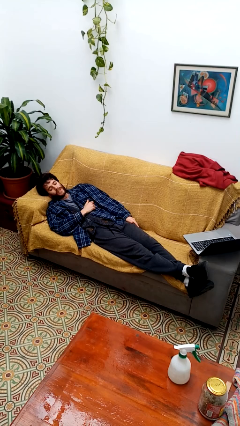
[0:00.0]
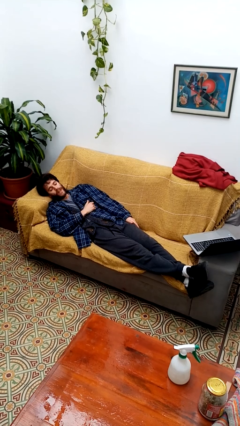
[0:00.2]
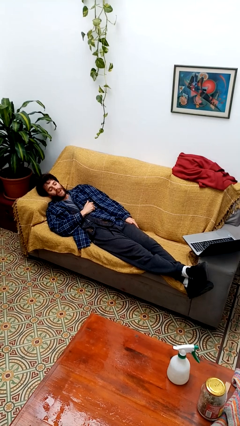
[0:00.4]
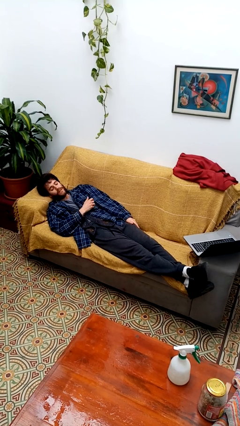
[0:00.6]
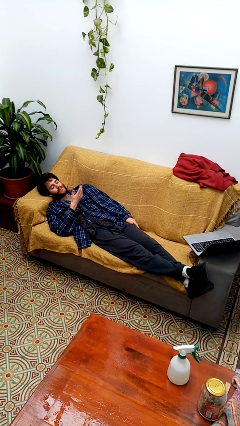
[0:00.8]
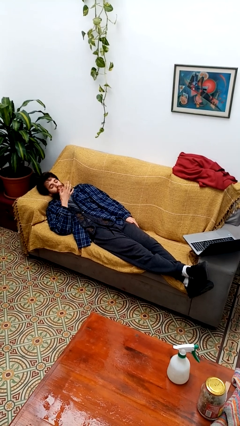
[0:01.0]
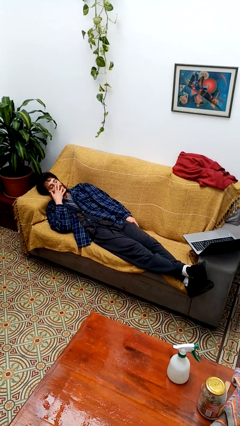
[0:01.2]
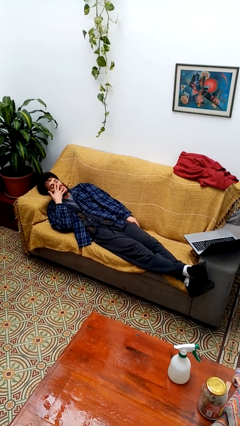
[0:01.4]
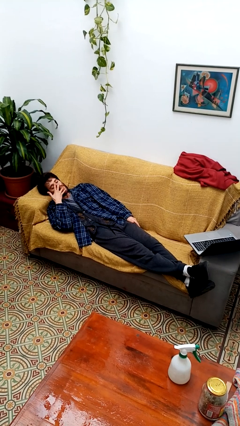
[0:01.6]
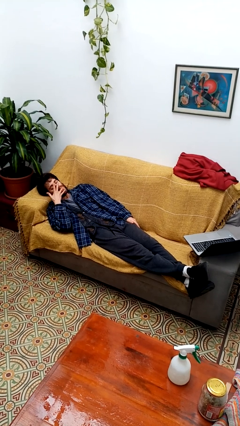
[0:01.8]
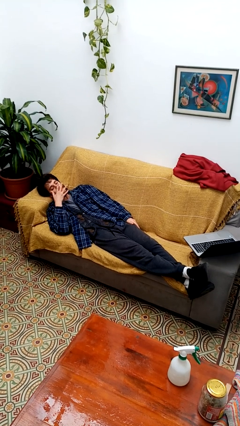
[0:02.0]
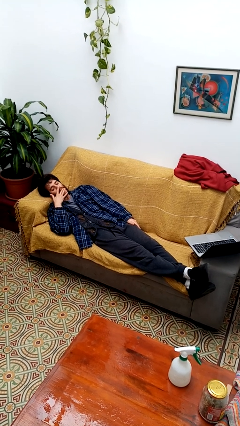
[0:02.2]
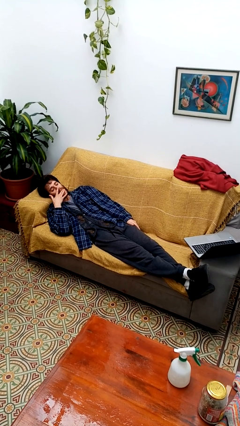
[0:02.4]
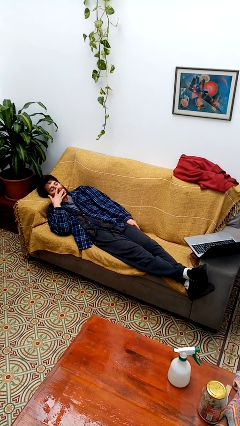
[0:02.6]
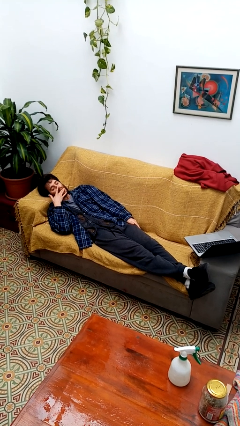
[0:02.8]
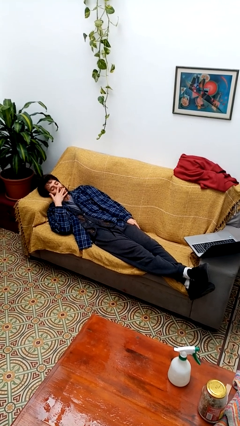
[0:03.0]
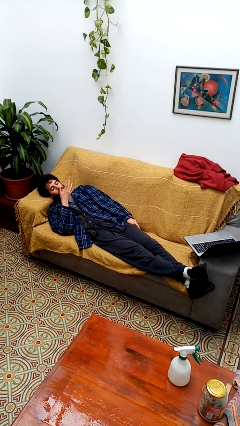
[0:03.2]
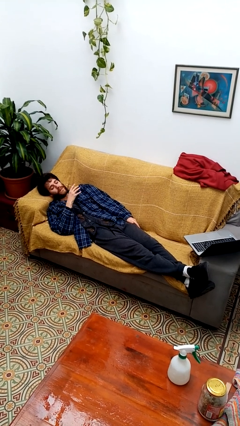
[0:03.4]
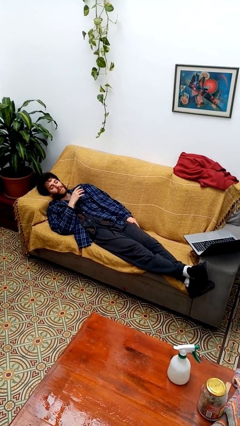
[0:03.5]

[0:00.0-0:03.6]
person licks fingers

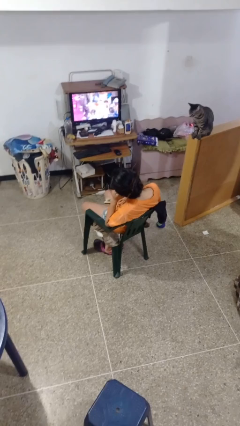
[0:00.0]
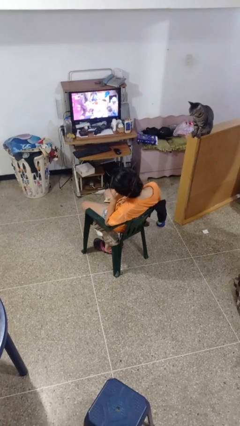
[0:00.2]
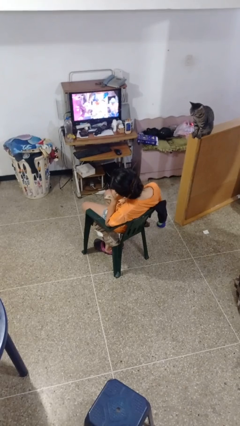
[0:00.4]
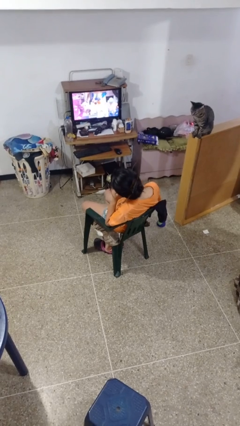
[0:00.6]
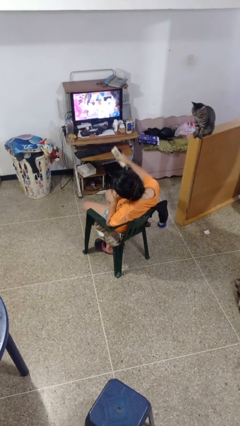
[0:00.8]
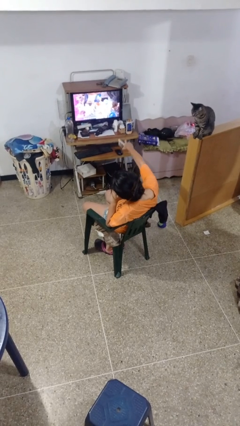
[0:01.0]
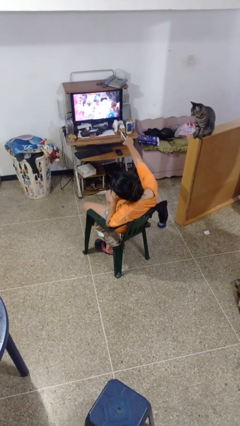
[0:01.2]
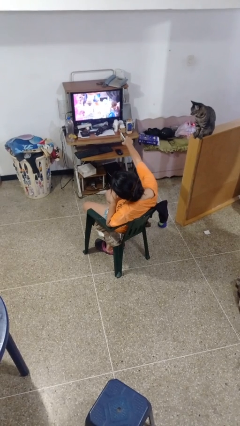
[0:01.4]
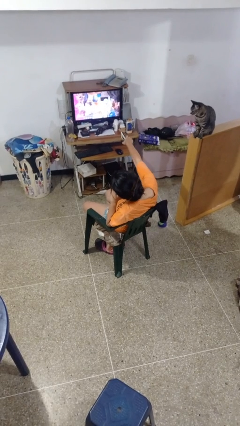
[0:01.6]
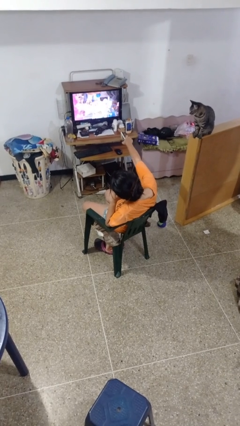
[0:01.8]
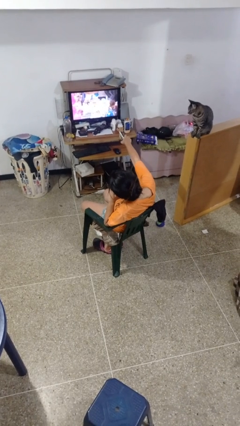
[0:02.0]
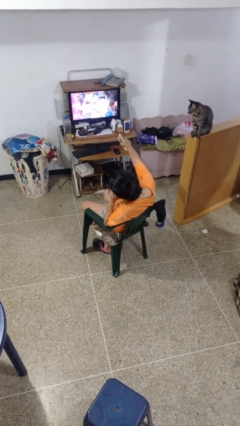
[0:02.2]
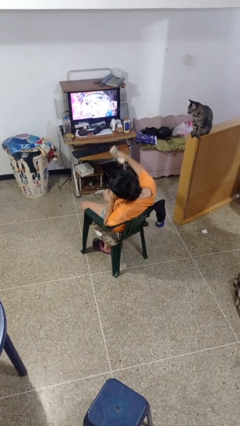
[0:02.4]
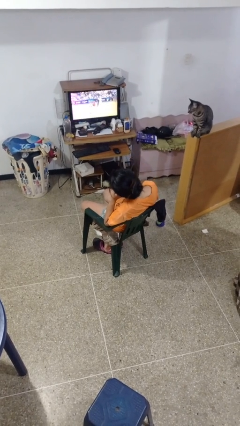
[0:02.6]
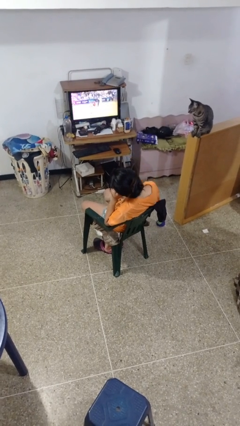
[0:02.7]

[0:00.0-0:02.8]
person uses television remote

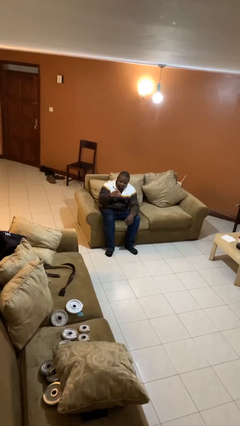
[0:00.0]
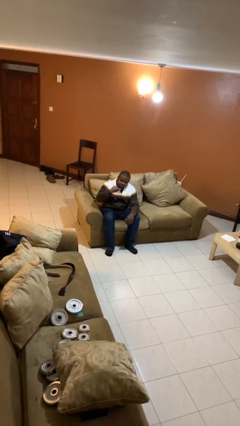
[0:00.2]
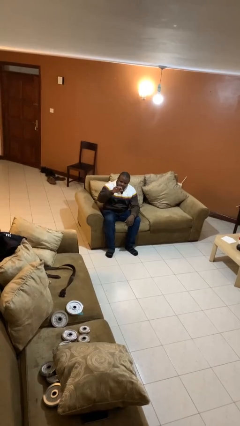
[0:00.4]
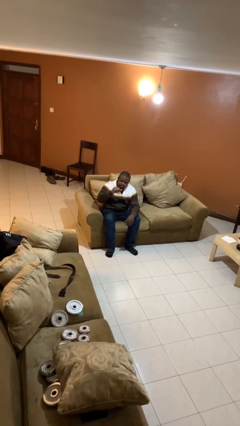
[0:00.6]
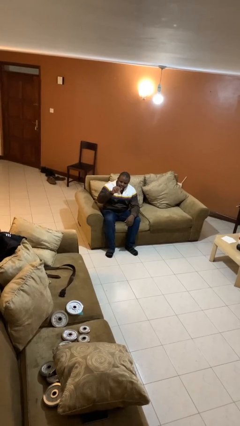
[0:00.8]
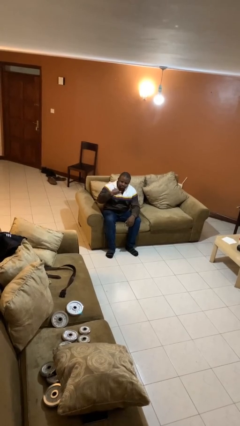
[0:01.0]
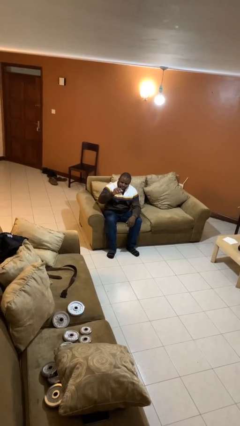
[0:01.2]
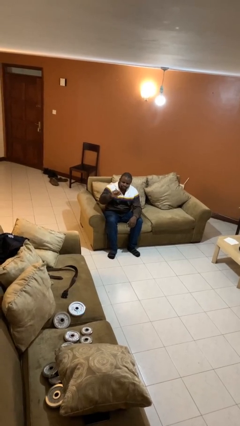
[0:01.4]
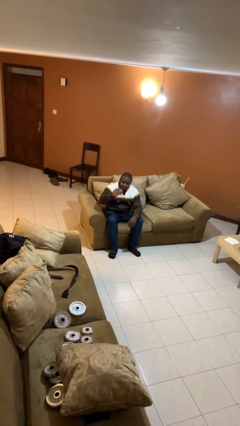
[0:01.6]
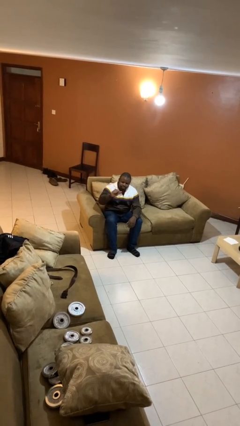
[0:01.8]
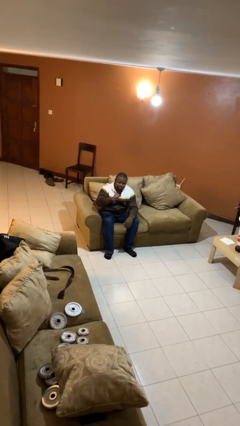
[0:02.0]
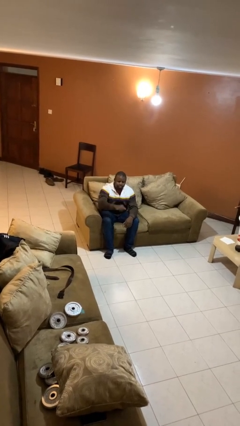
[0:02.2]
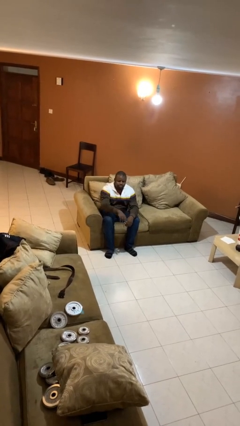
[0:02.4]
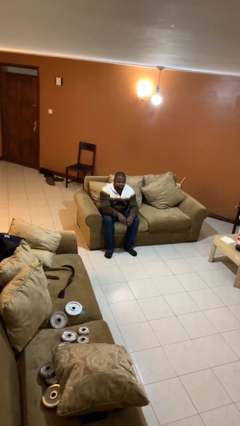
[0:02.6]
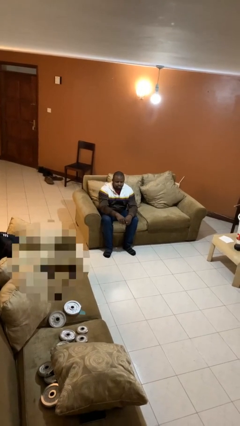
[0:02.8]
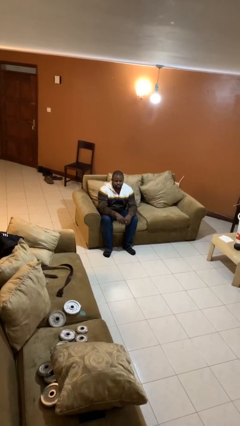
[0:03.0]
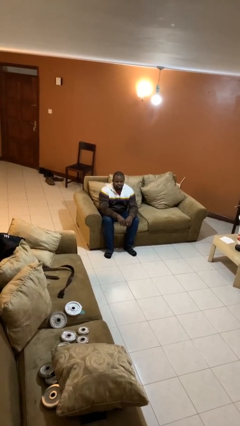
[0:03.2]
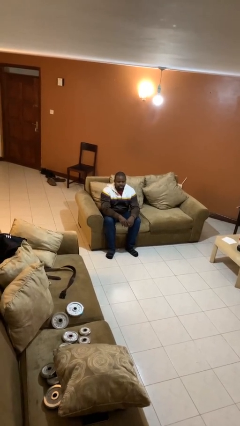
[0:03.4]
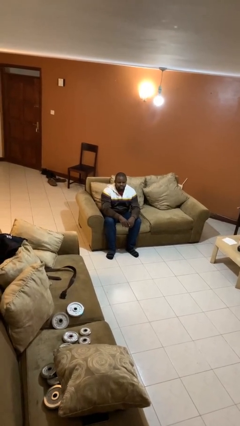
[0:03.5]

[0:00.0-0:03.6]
person gestures come here

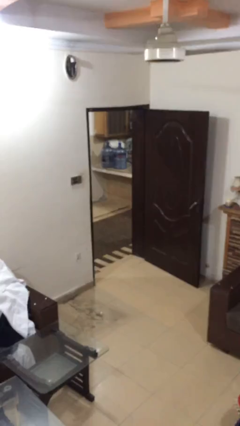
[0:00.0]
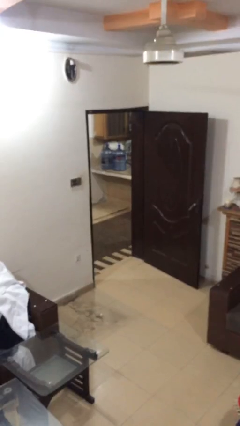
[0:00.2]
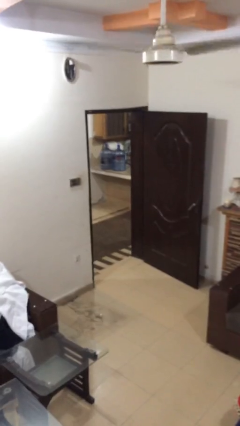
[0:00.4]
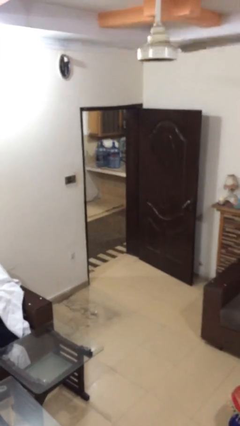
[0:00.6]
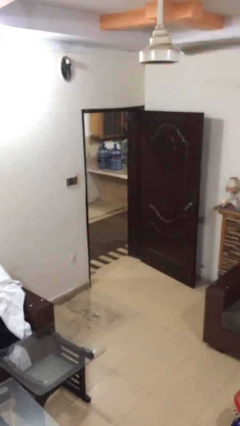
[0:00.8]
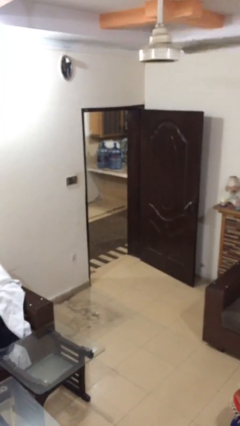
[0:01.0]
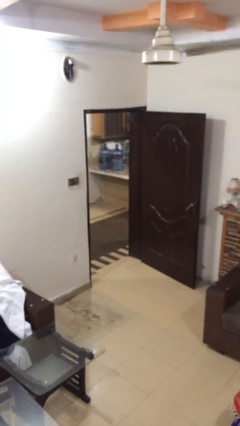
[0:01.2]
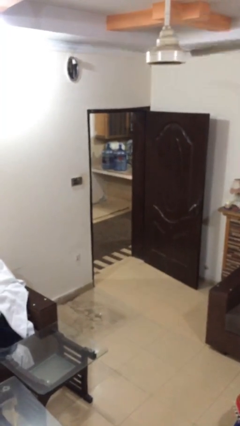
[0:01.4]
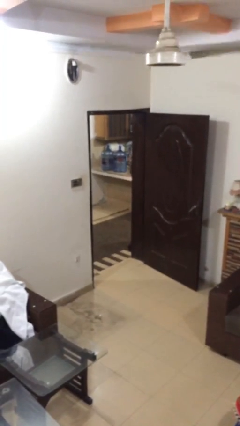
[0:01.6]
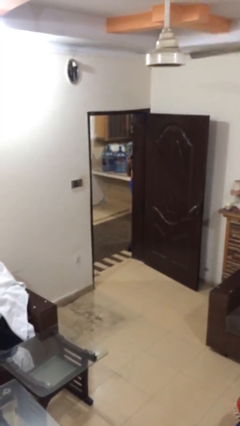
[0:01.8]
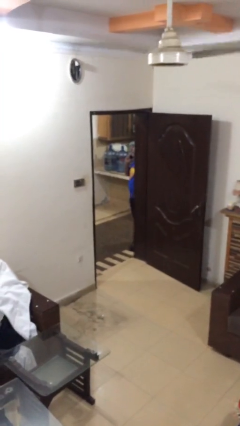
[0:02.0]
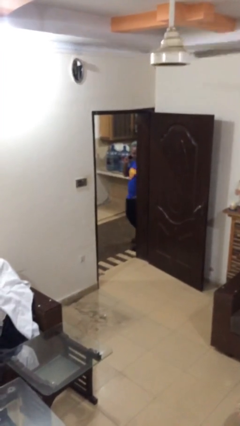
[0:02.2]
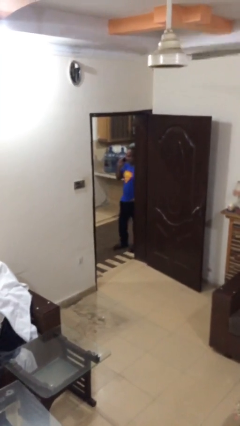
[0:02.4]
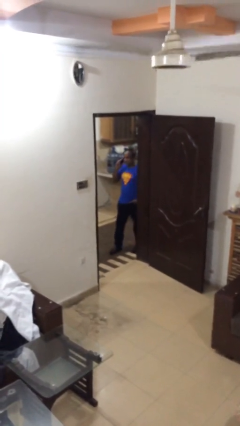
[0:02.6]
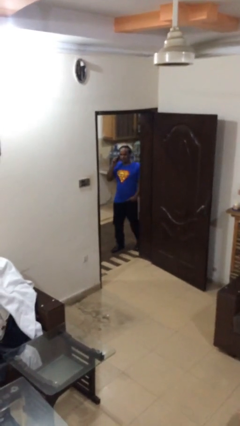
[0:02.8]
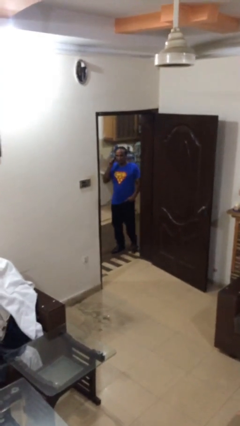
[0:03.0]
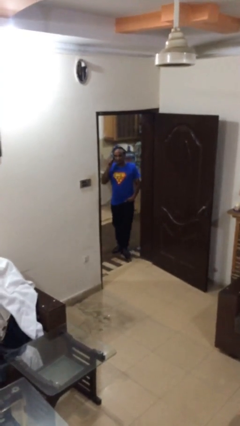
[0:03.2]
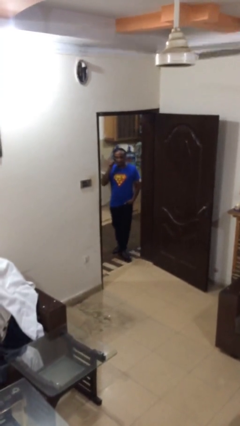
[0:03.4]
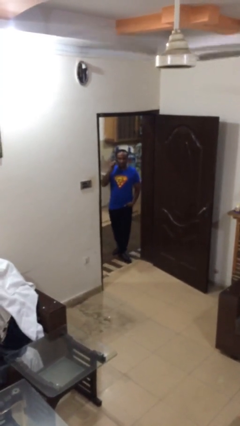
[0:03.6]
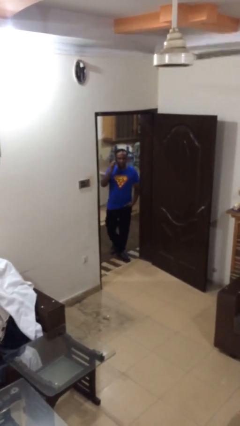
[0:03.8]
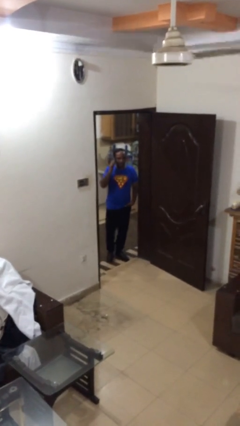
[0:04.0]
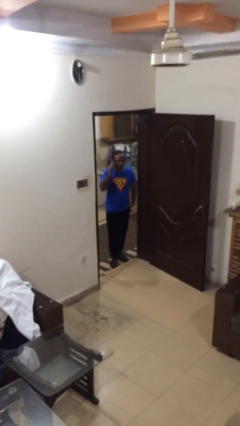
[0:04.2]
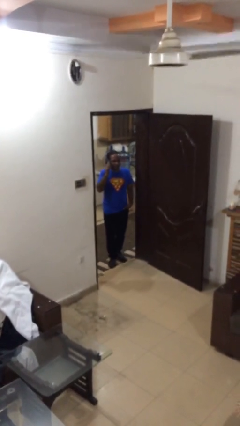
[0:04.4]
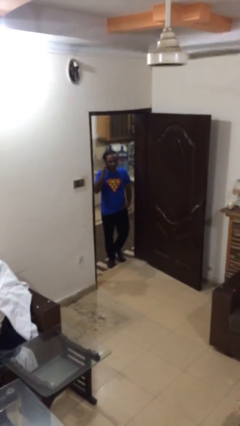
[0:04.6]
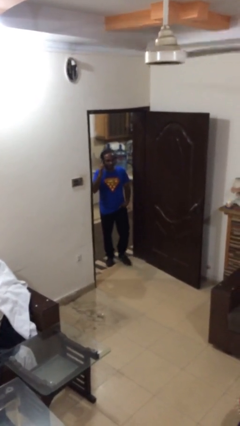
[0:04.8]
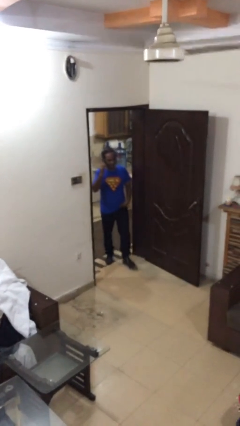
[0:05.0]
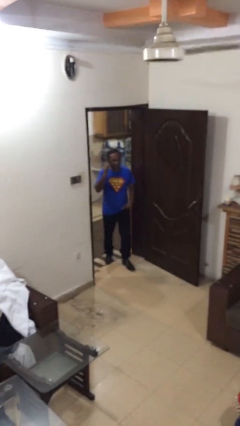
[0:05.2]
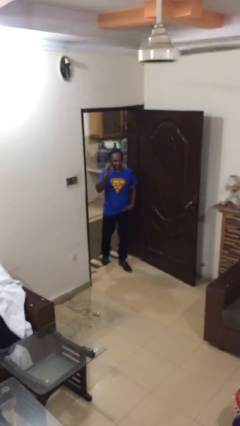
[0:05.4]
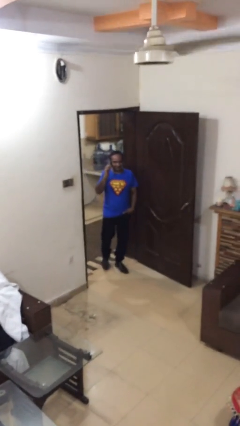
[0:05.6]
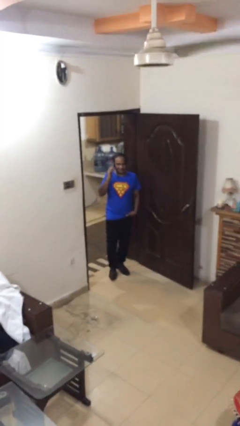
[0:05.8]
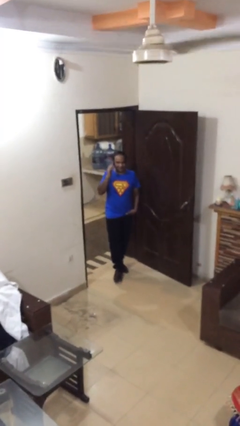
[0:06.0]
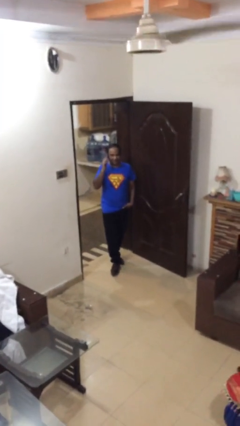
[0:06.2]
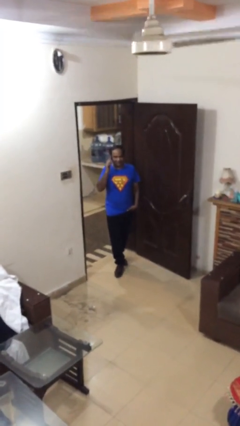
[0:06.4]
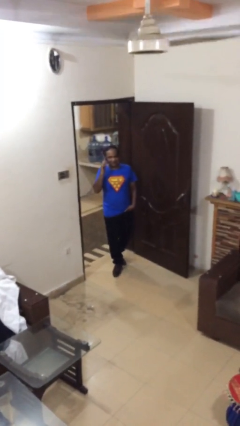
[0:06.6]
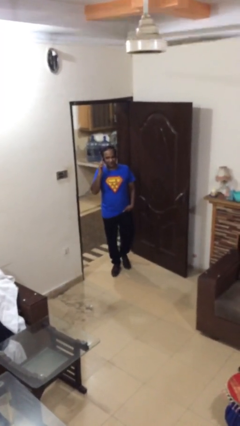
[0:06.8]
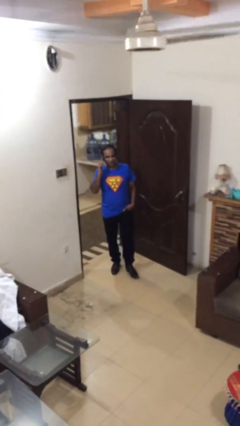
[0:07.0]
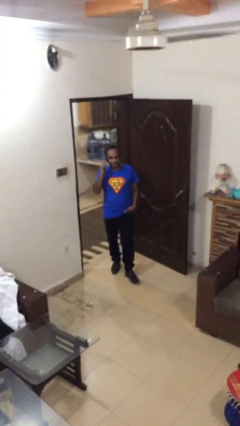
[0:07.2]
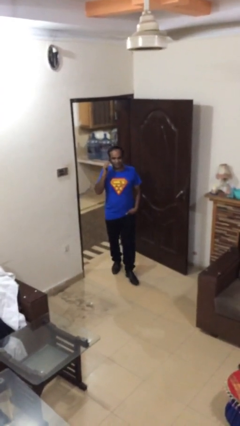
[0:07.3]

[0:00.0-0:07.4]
person enters scene through structure

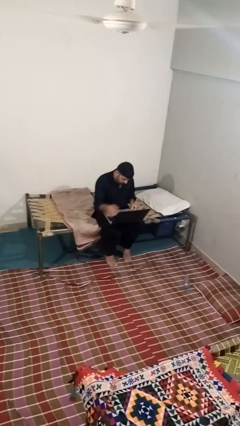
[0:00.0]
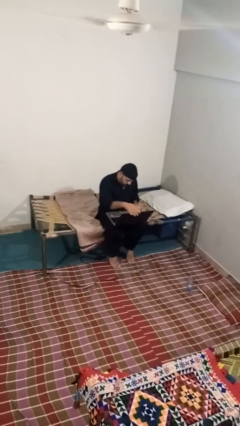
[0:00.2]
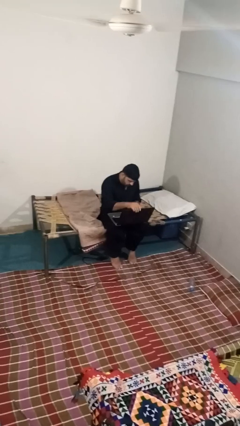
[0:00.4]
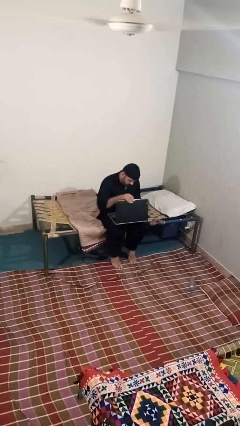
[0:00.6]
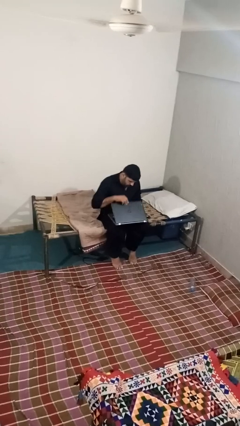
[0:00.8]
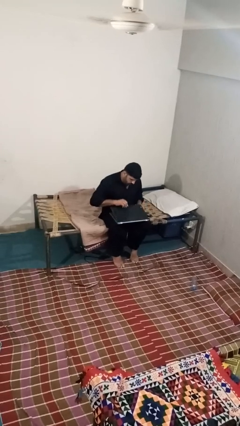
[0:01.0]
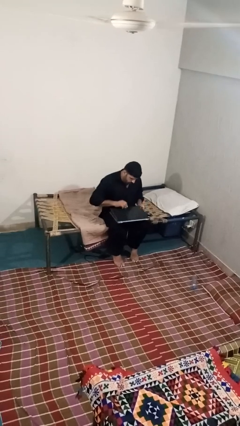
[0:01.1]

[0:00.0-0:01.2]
person closes laptop
